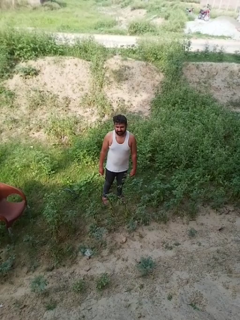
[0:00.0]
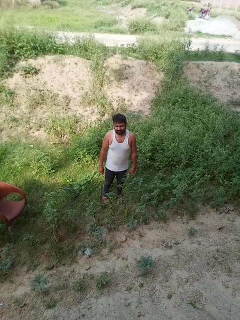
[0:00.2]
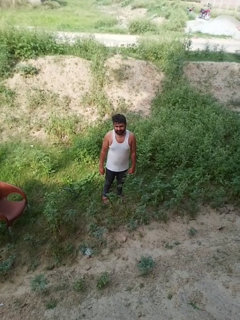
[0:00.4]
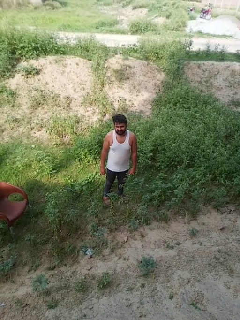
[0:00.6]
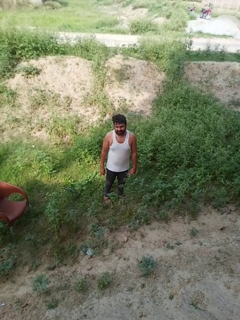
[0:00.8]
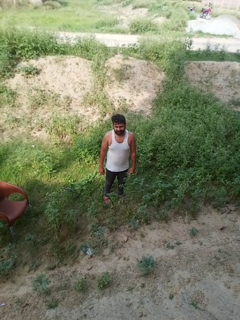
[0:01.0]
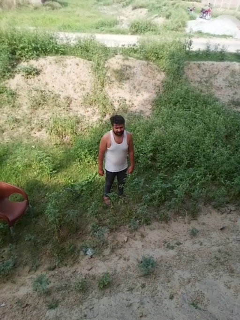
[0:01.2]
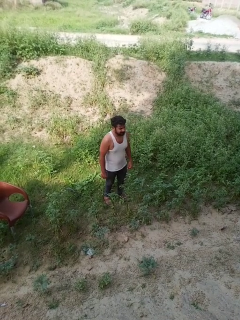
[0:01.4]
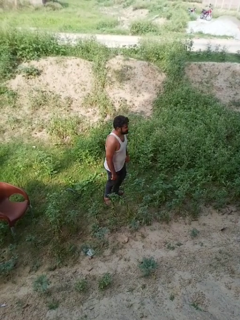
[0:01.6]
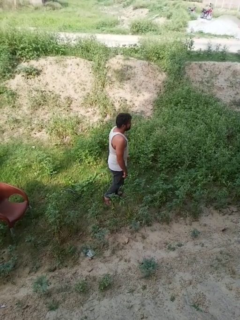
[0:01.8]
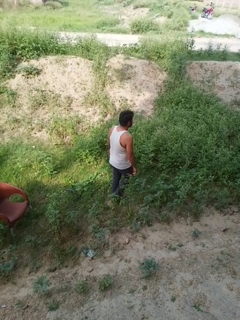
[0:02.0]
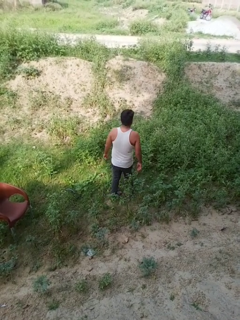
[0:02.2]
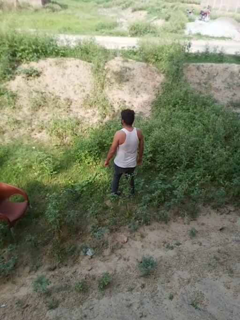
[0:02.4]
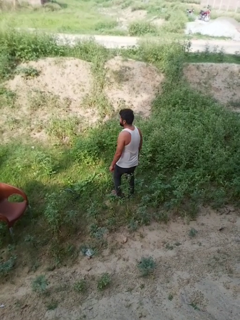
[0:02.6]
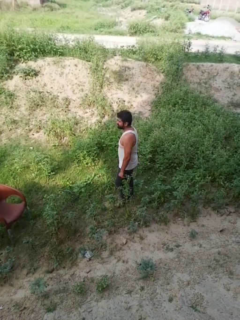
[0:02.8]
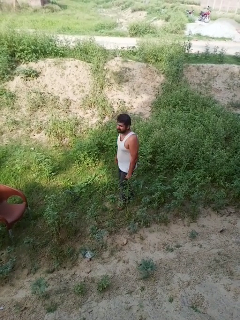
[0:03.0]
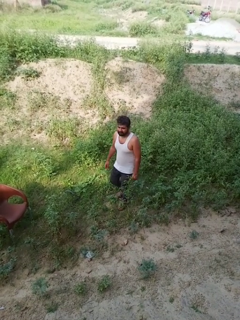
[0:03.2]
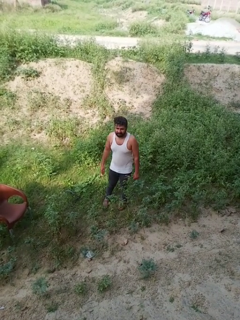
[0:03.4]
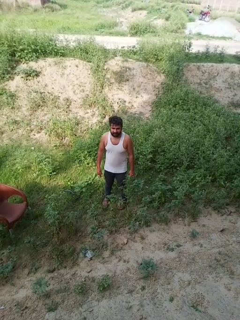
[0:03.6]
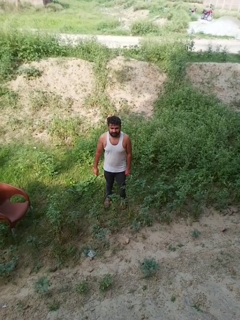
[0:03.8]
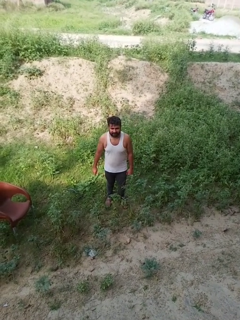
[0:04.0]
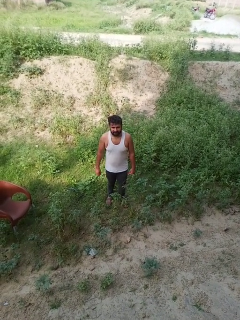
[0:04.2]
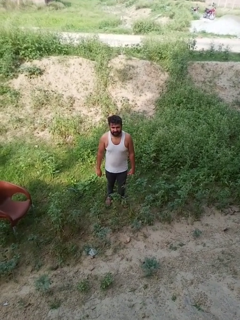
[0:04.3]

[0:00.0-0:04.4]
person twirls

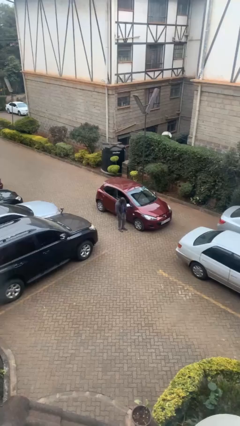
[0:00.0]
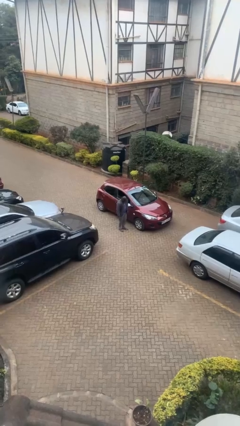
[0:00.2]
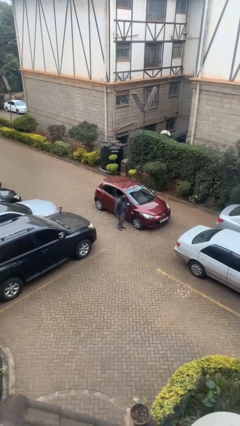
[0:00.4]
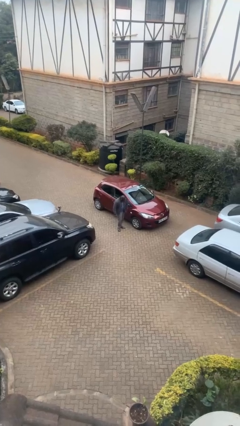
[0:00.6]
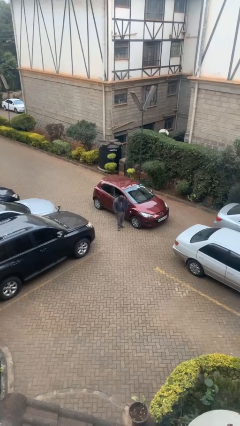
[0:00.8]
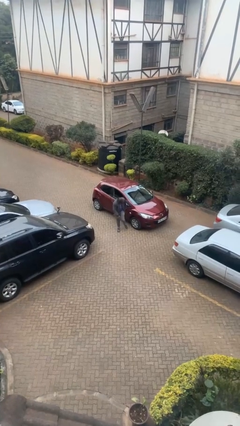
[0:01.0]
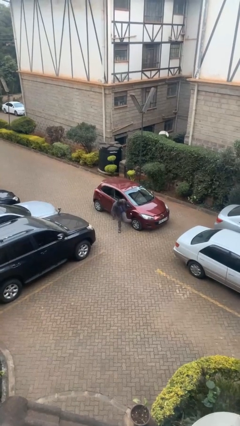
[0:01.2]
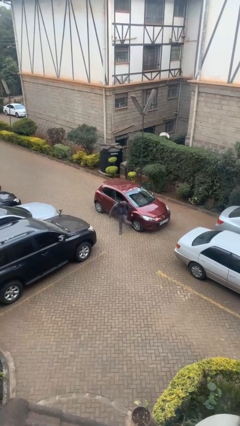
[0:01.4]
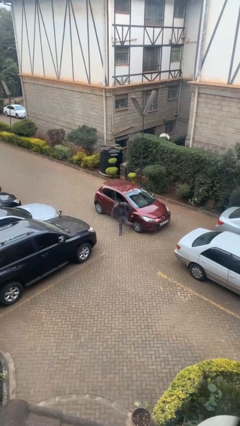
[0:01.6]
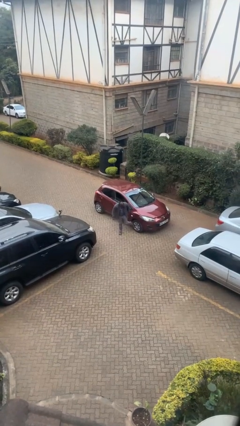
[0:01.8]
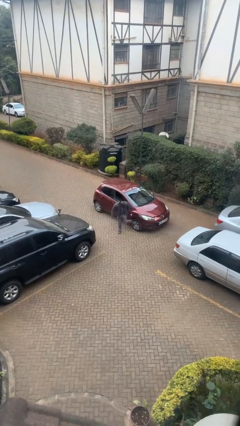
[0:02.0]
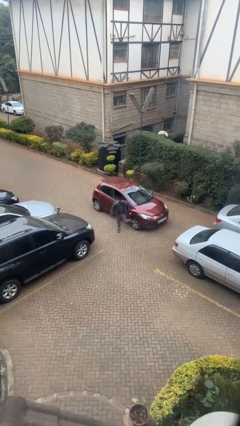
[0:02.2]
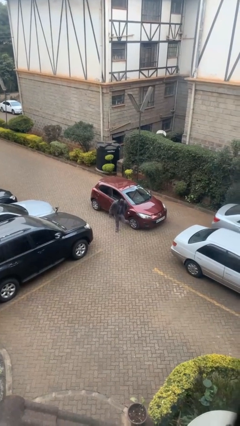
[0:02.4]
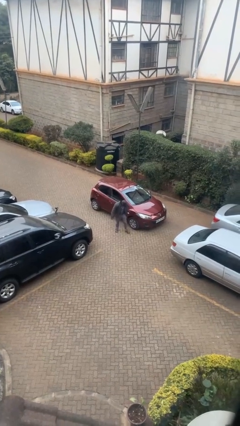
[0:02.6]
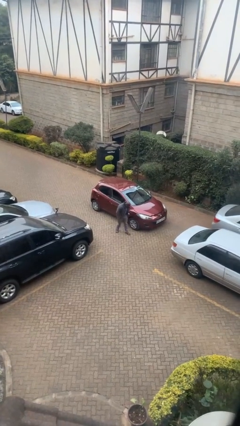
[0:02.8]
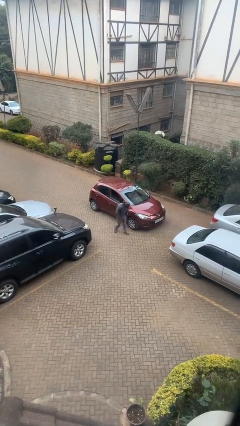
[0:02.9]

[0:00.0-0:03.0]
person kicks car tires

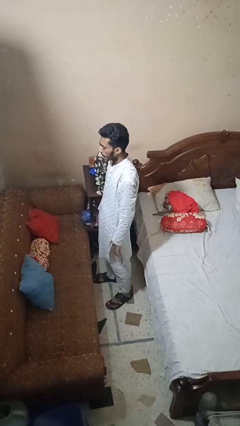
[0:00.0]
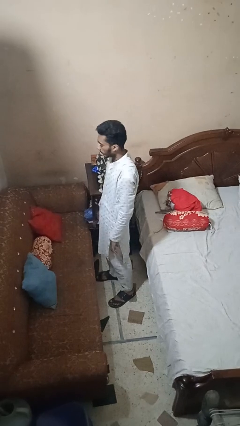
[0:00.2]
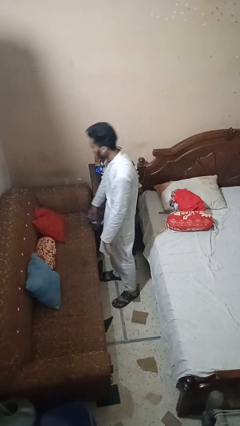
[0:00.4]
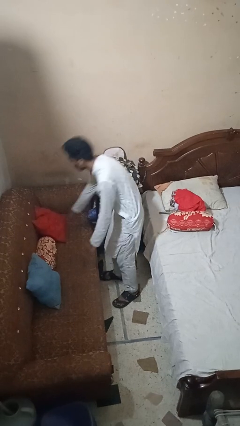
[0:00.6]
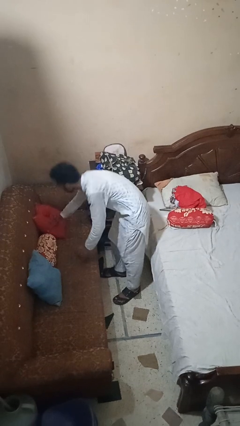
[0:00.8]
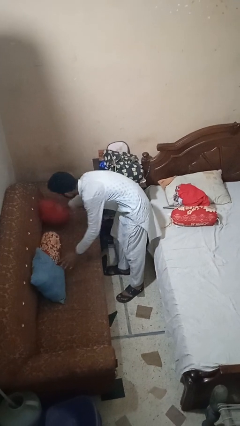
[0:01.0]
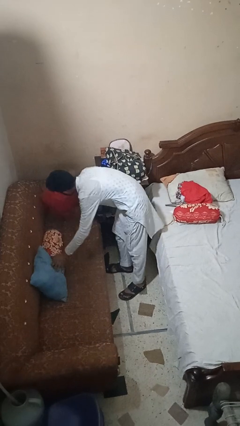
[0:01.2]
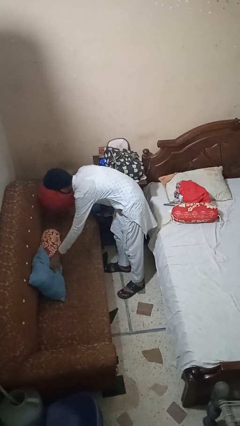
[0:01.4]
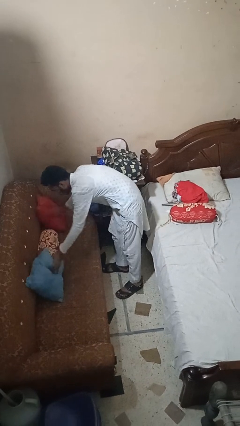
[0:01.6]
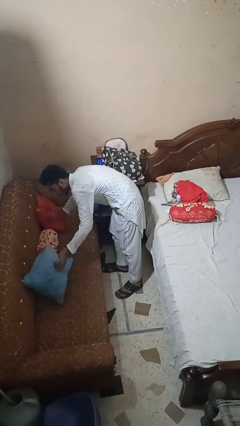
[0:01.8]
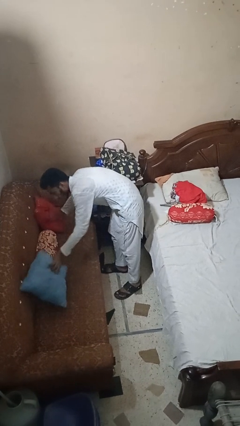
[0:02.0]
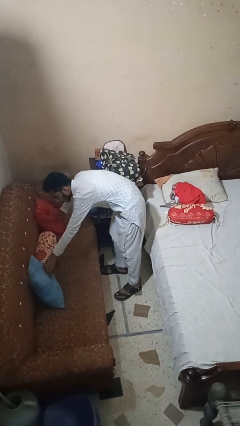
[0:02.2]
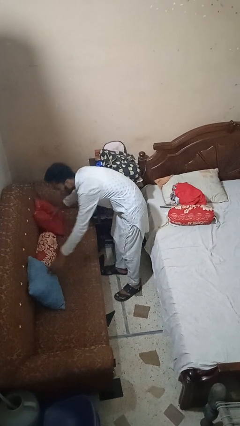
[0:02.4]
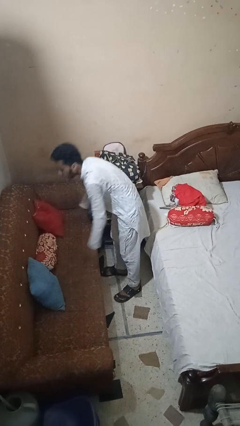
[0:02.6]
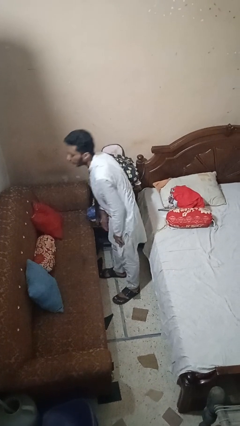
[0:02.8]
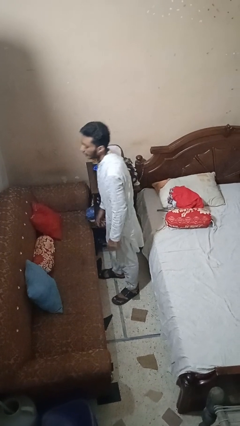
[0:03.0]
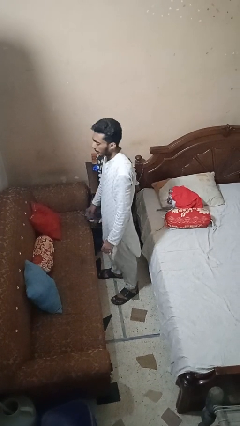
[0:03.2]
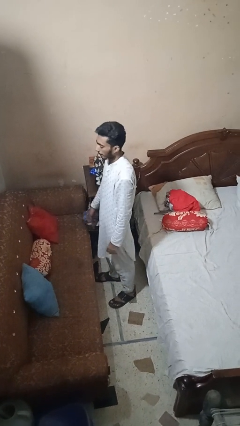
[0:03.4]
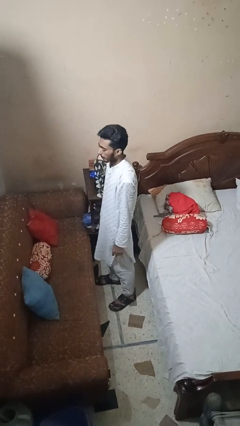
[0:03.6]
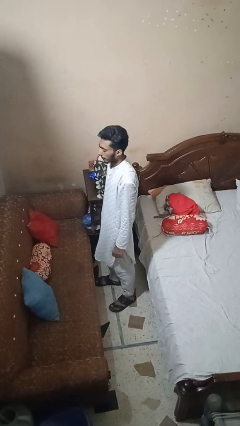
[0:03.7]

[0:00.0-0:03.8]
person searches in couch

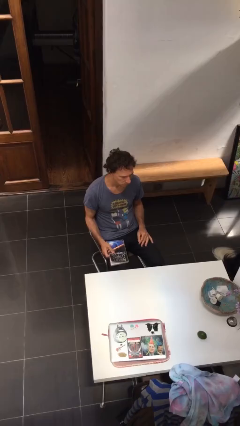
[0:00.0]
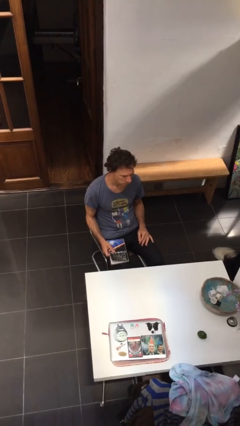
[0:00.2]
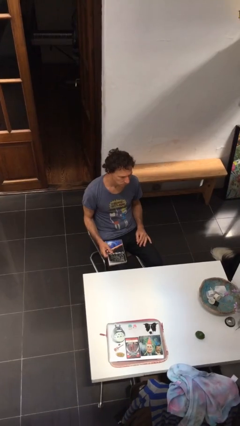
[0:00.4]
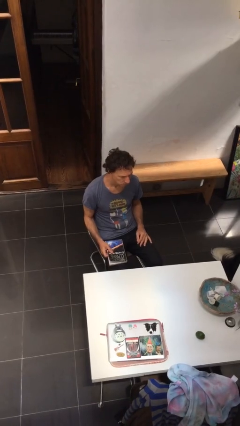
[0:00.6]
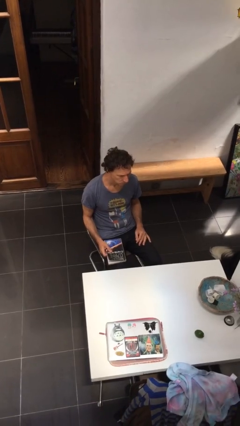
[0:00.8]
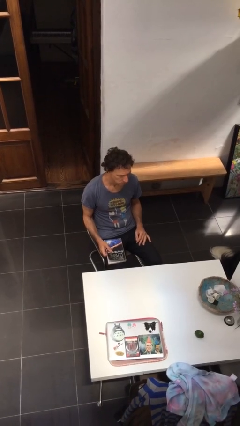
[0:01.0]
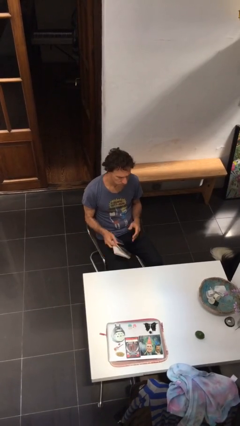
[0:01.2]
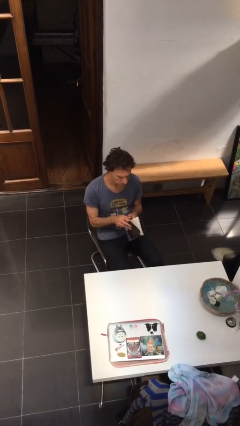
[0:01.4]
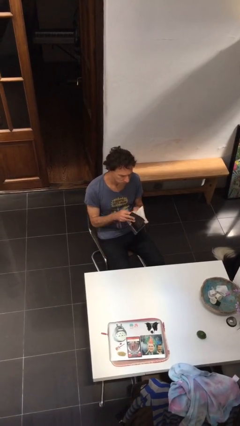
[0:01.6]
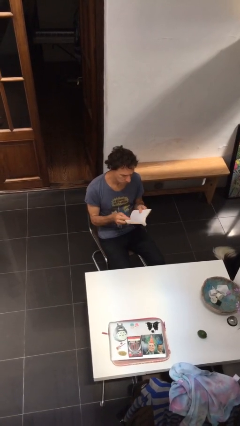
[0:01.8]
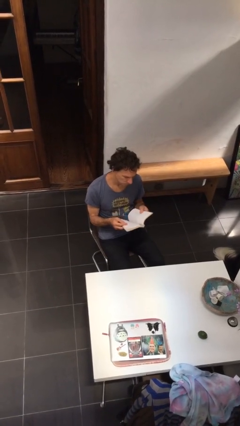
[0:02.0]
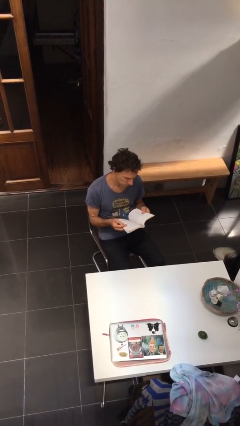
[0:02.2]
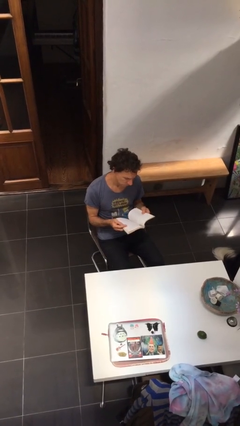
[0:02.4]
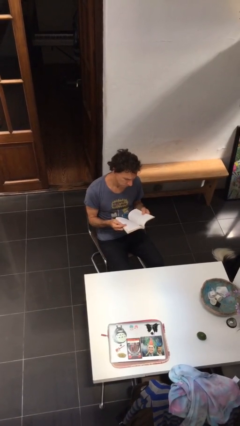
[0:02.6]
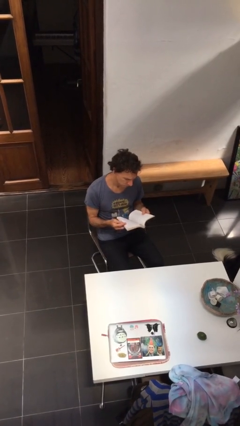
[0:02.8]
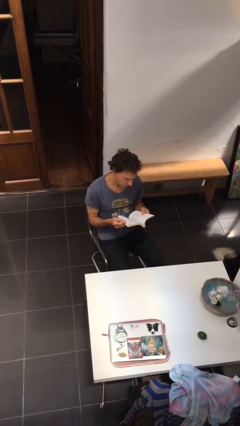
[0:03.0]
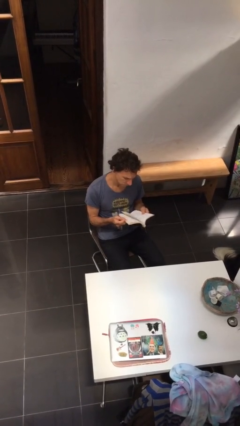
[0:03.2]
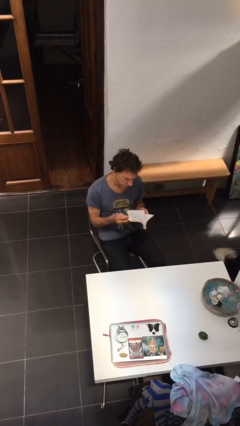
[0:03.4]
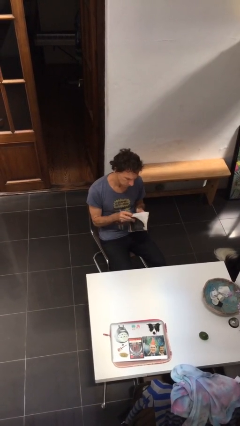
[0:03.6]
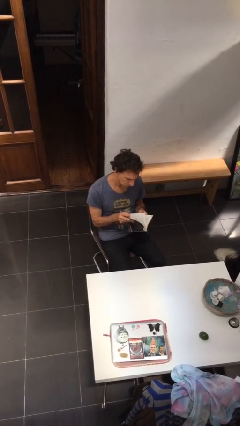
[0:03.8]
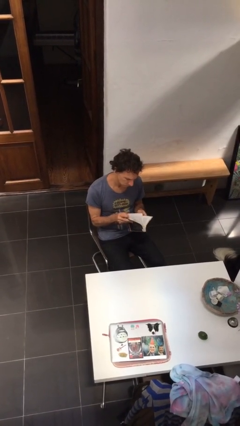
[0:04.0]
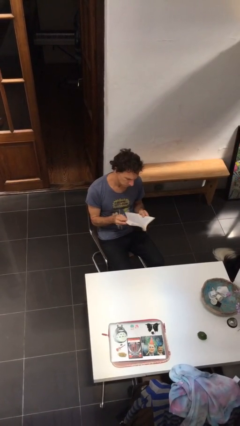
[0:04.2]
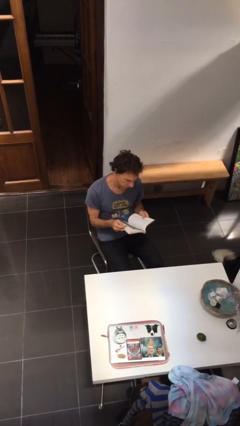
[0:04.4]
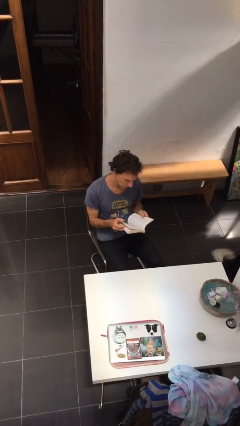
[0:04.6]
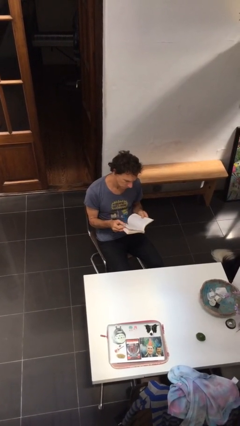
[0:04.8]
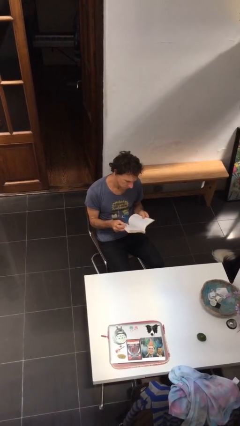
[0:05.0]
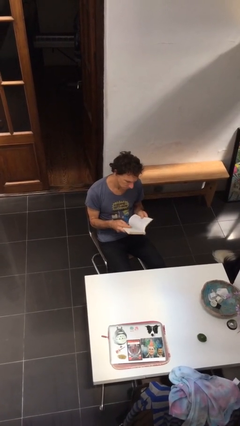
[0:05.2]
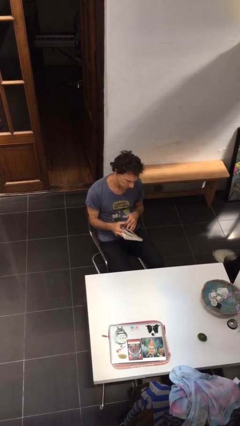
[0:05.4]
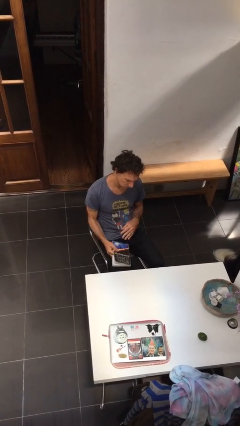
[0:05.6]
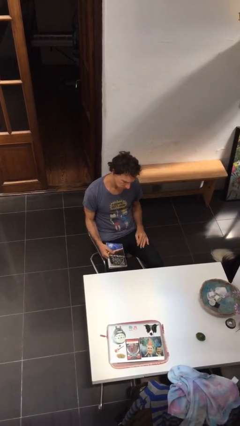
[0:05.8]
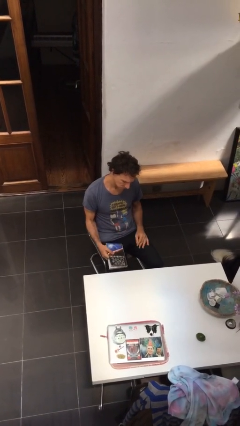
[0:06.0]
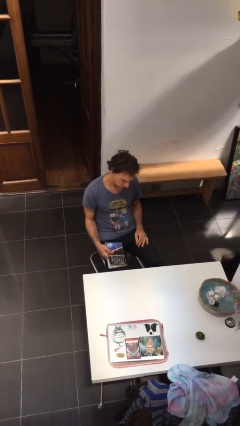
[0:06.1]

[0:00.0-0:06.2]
person reads document

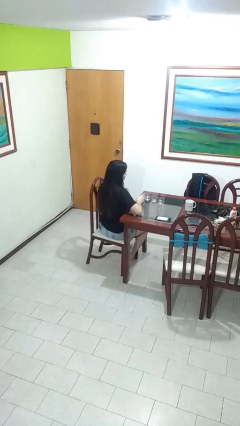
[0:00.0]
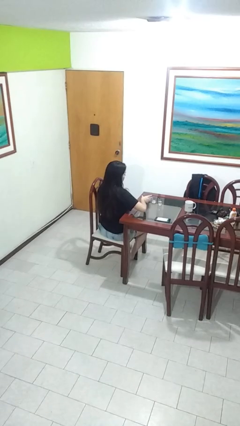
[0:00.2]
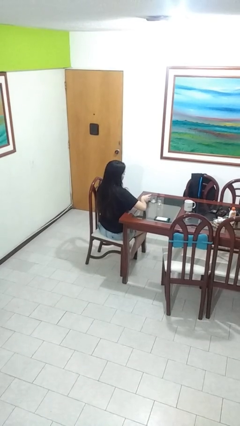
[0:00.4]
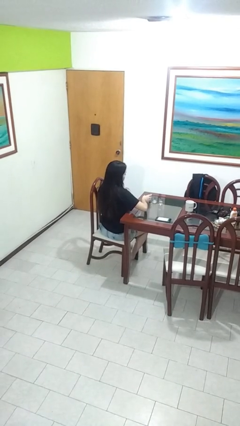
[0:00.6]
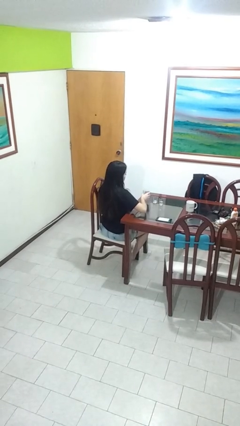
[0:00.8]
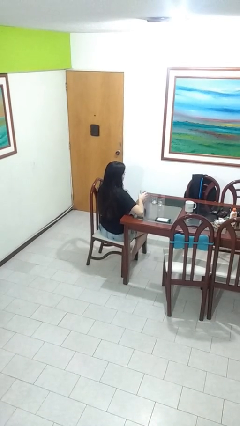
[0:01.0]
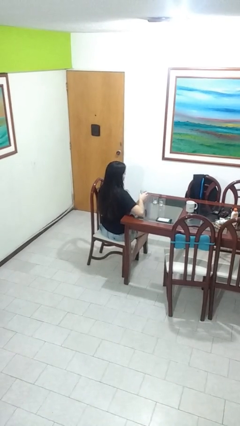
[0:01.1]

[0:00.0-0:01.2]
person picks up object from table
